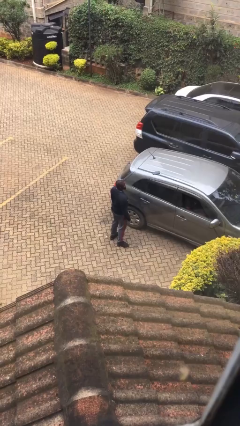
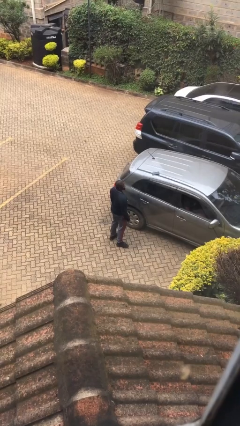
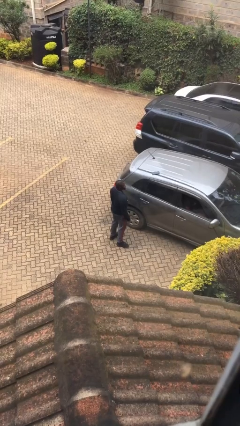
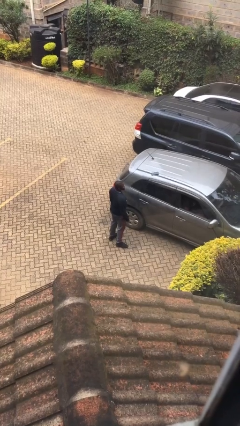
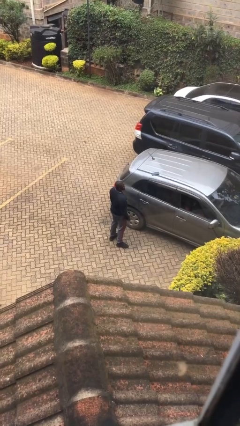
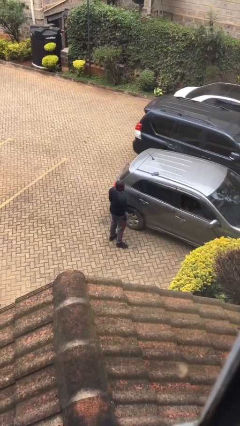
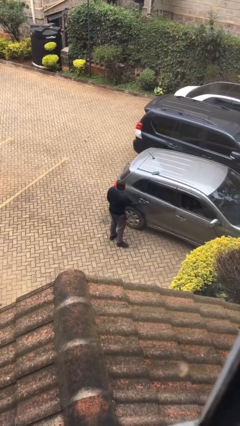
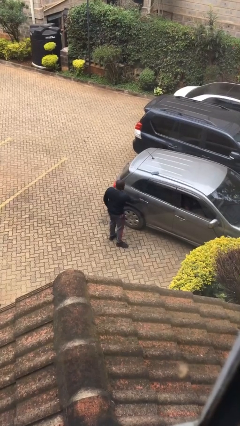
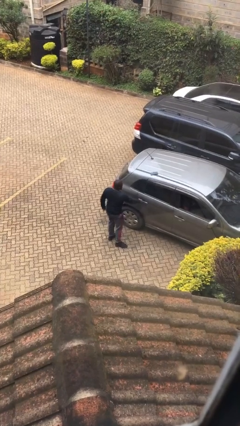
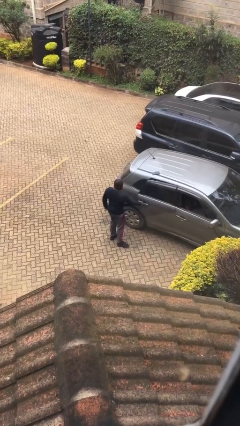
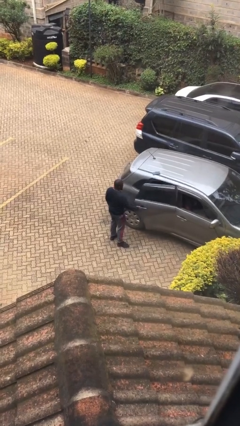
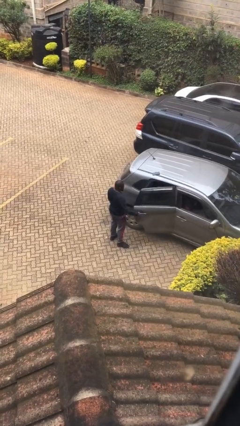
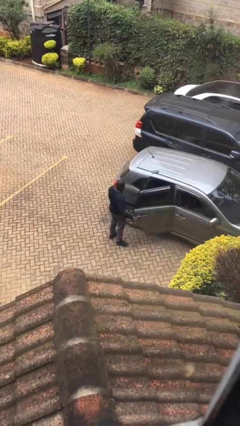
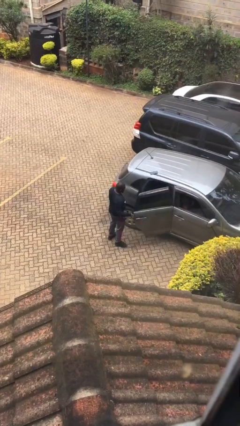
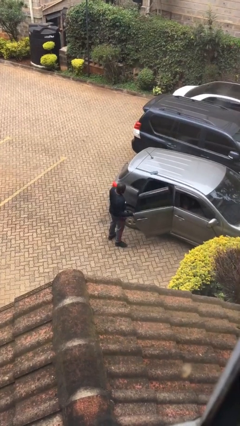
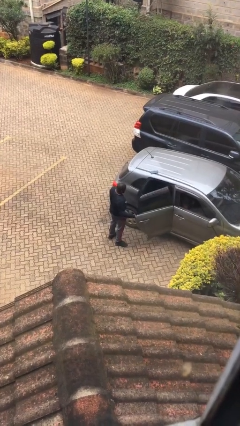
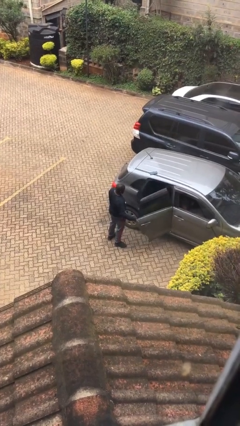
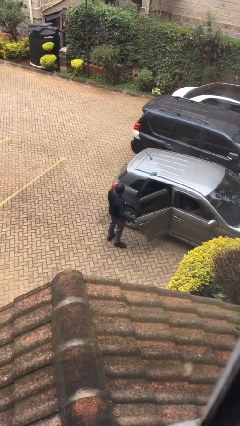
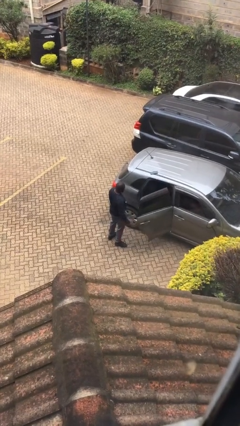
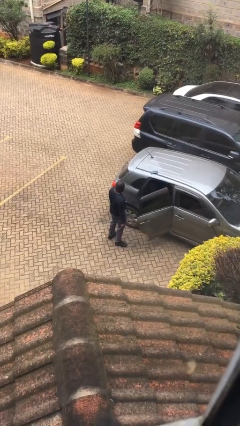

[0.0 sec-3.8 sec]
person opens car door

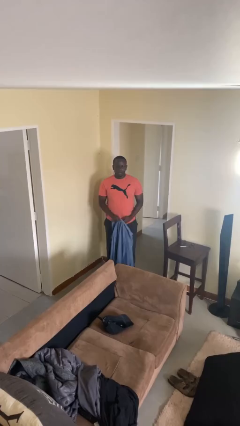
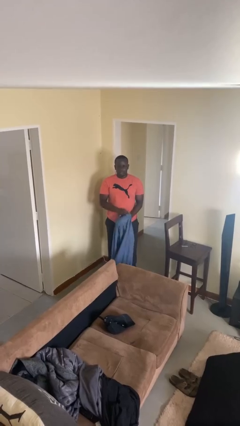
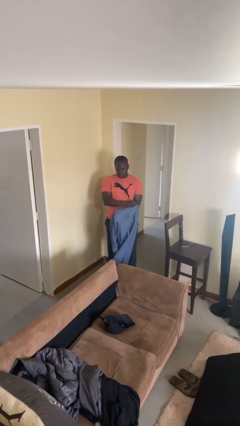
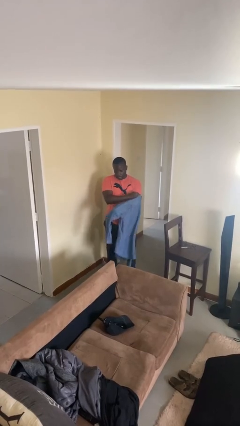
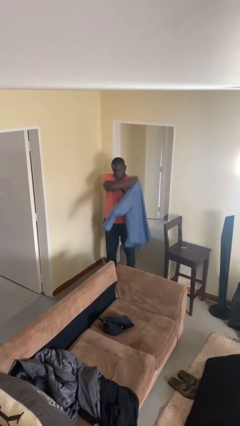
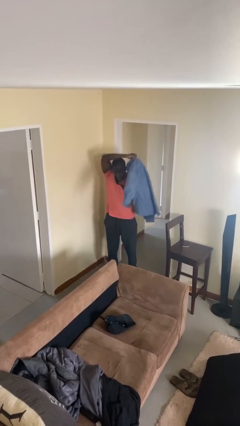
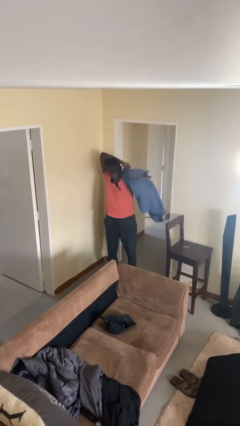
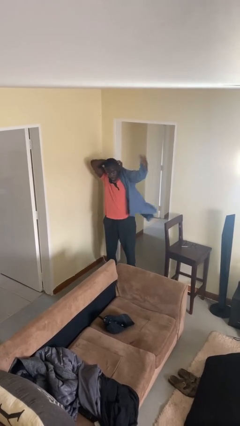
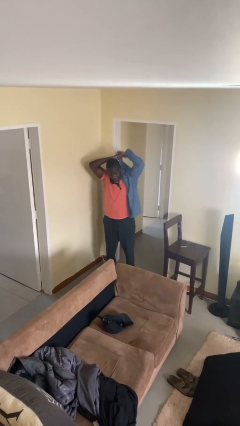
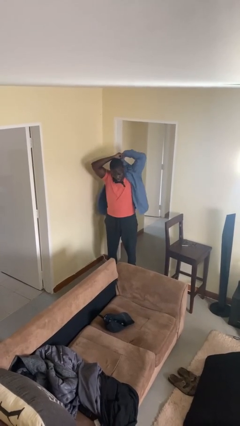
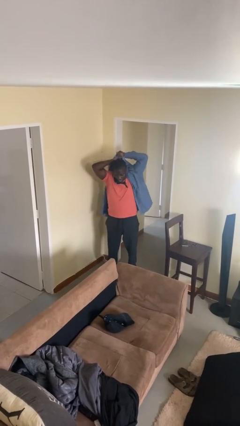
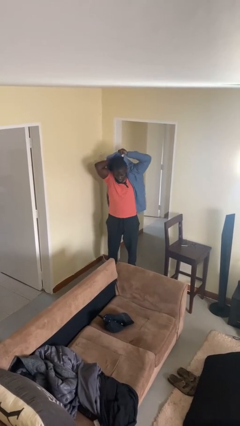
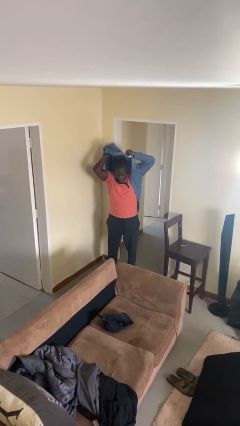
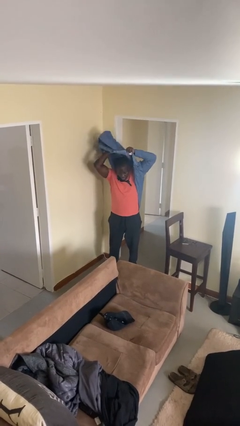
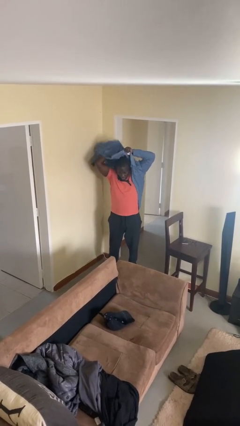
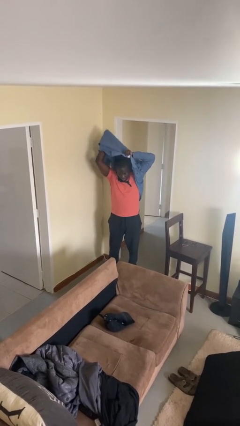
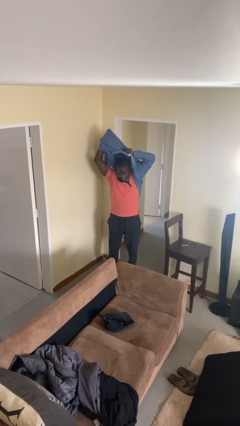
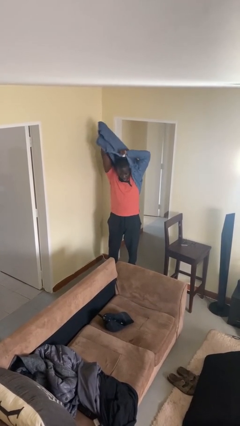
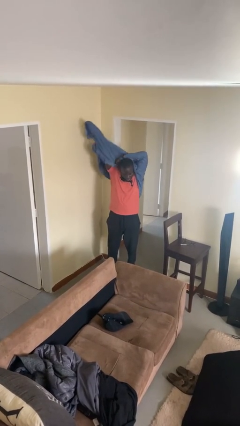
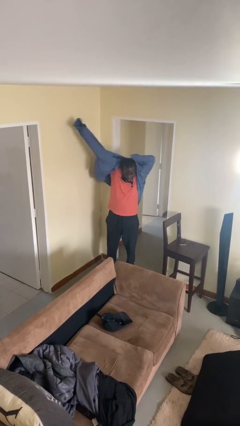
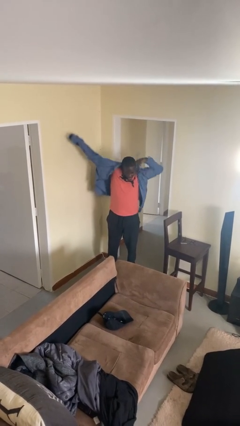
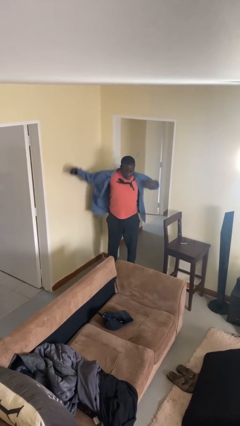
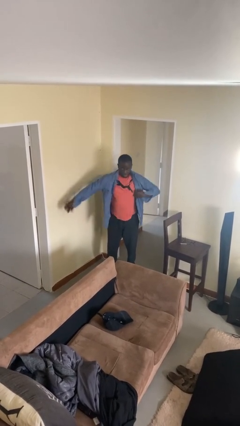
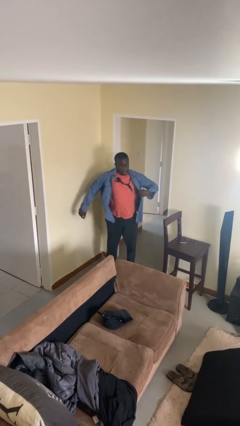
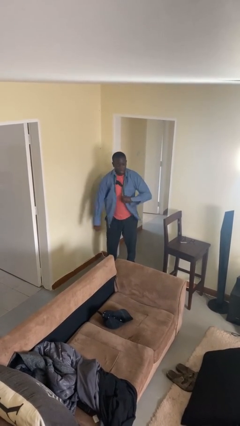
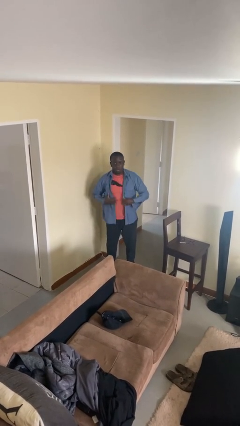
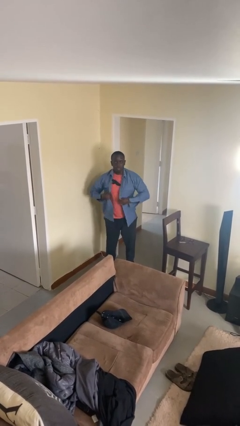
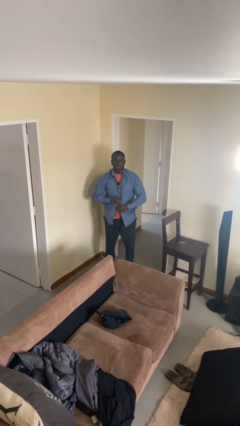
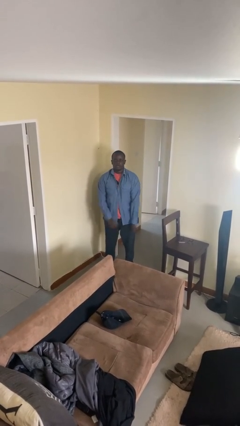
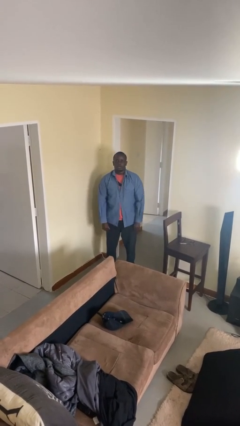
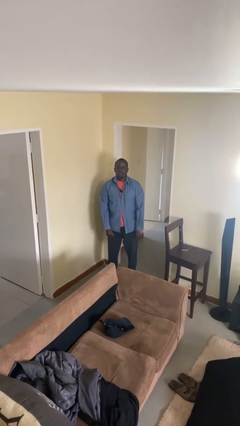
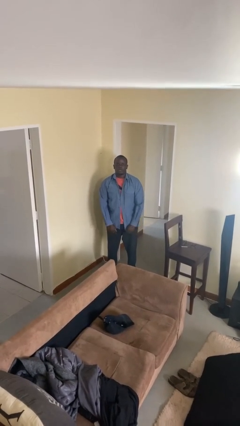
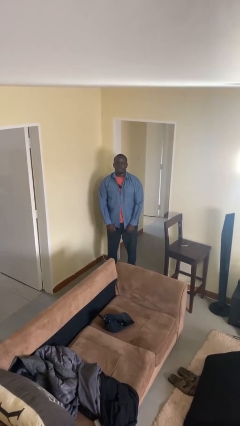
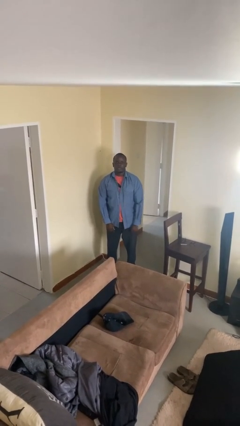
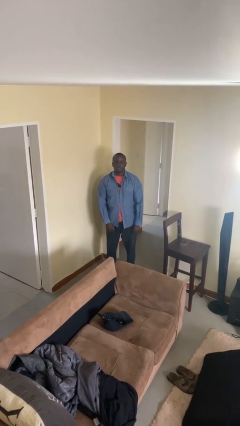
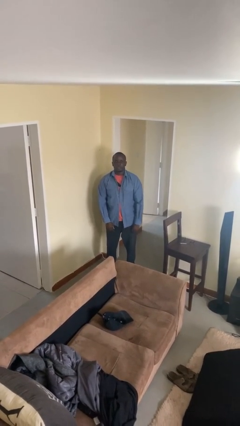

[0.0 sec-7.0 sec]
person puts on shirt

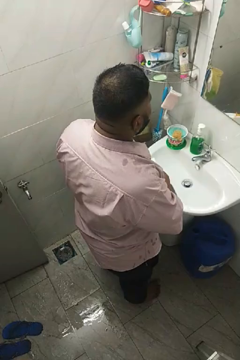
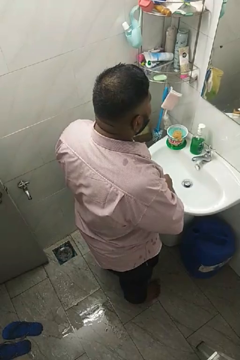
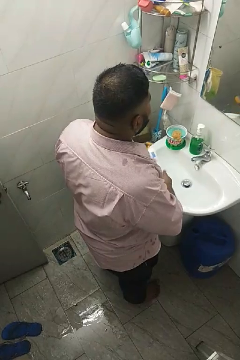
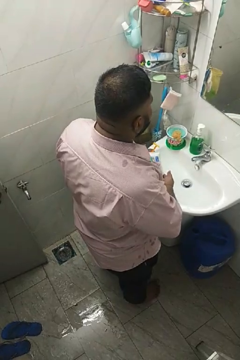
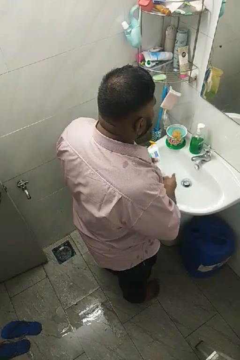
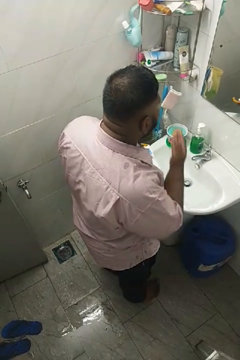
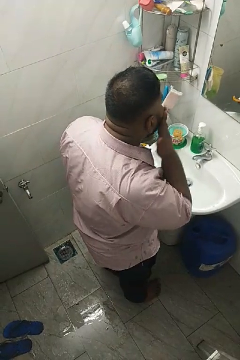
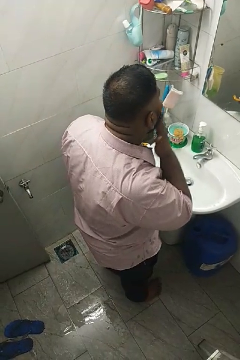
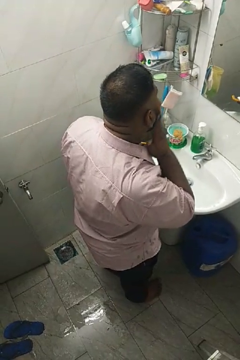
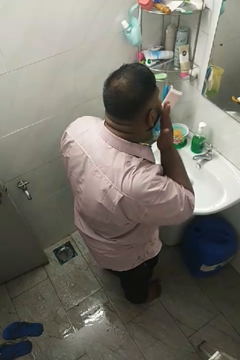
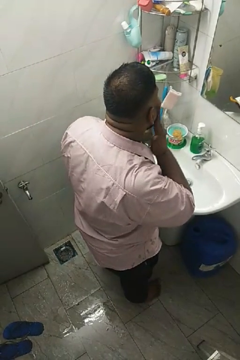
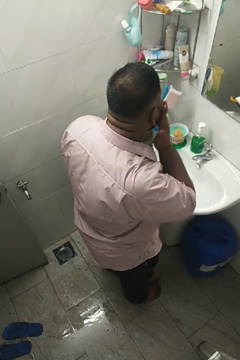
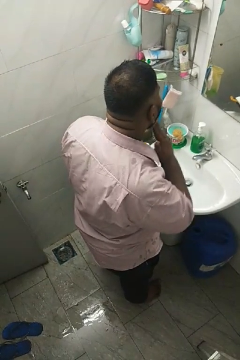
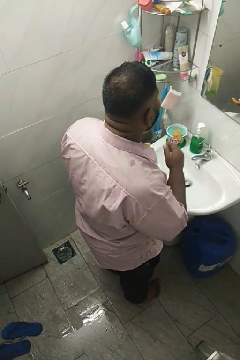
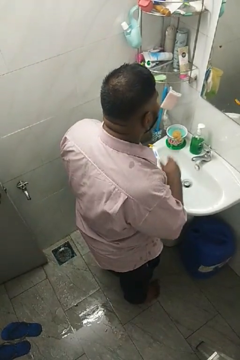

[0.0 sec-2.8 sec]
person applies shaving cream

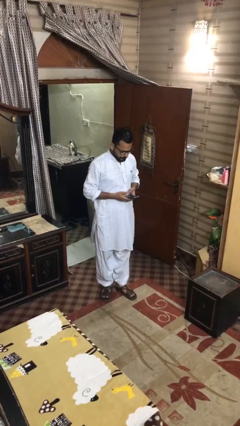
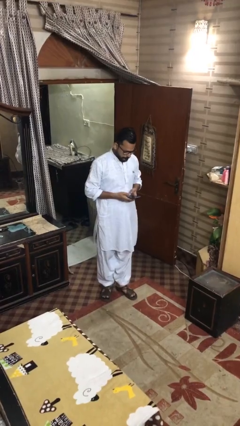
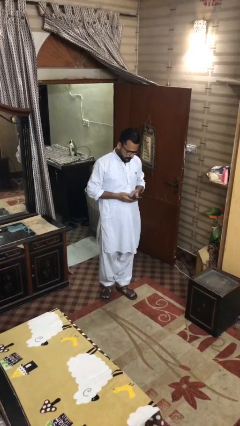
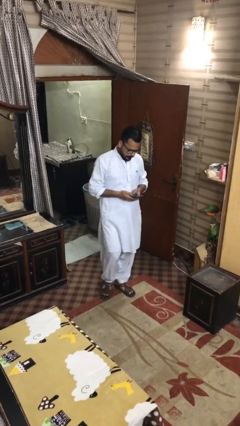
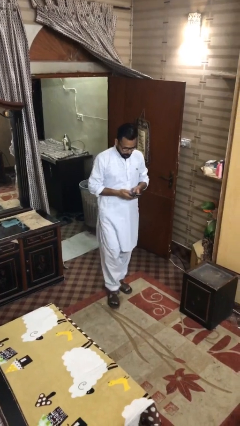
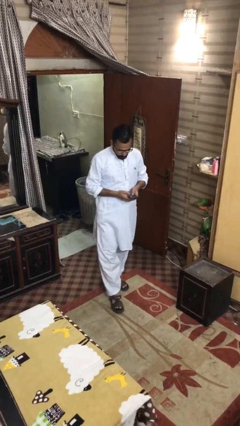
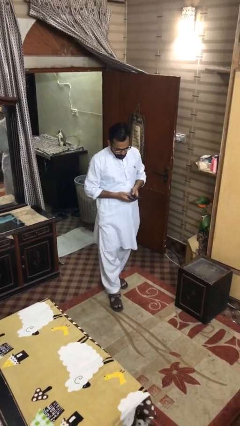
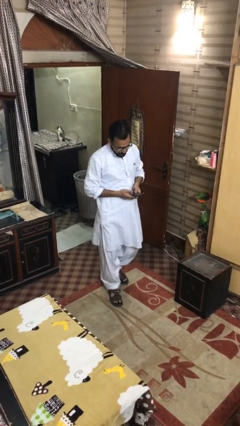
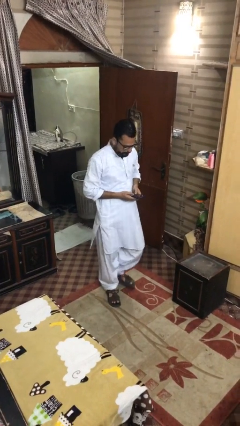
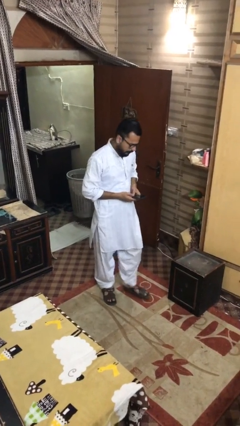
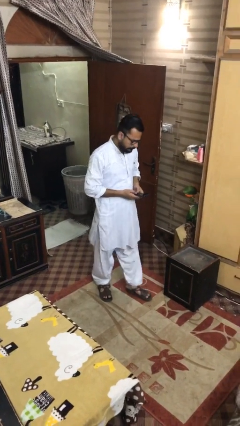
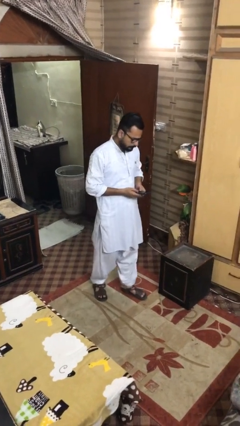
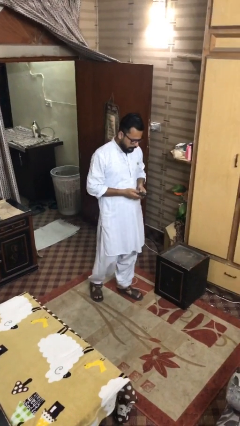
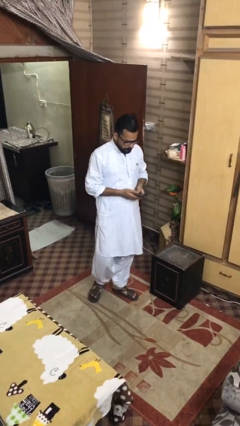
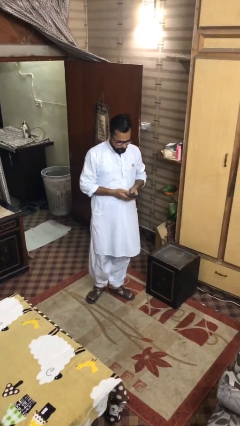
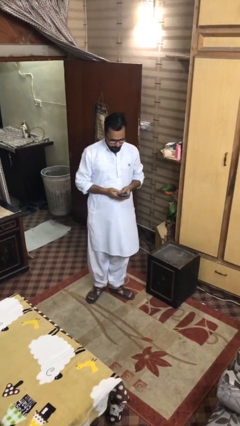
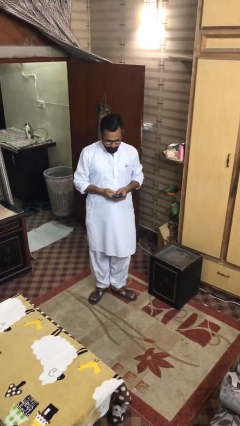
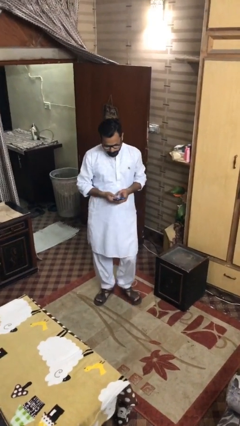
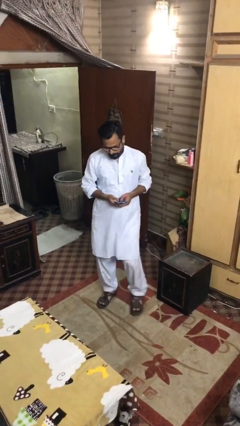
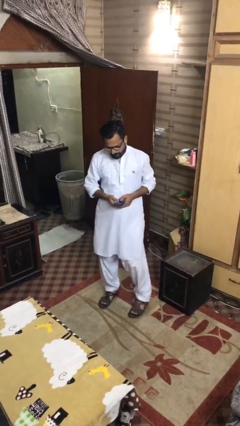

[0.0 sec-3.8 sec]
person texts on phone

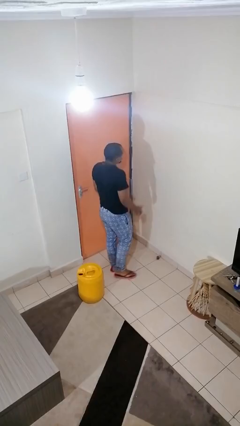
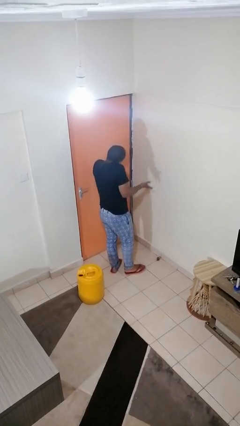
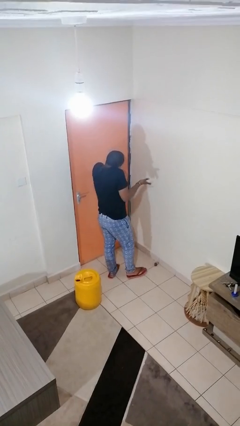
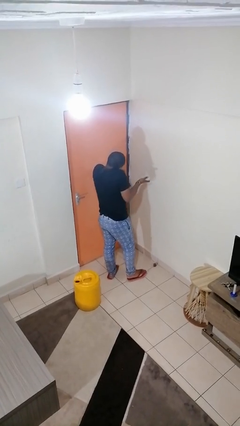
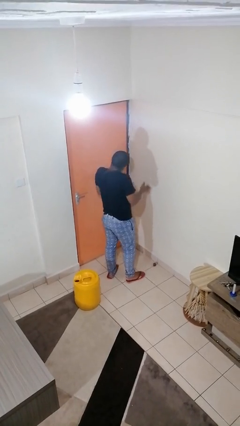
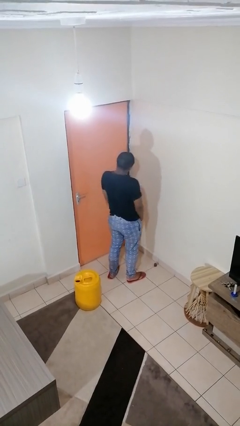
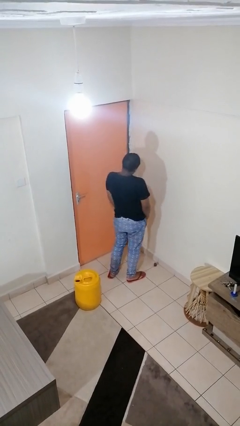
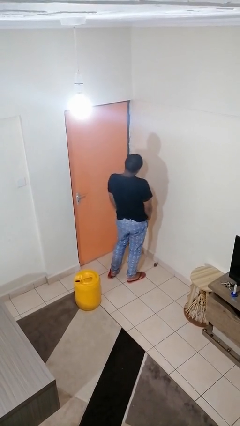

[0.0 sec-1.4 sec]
person shrugs
